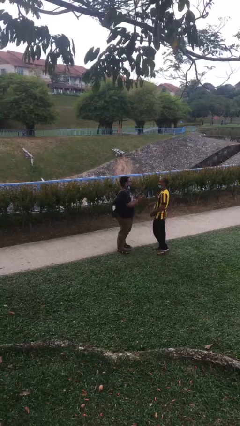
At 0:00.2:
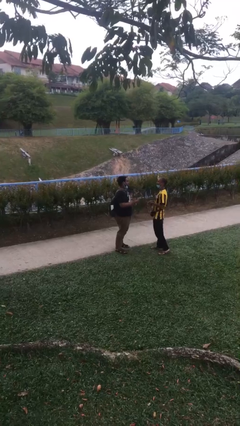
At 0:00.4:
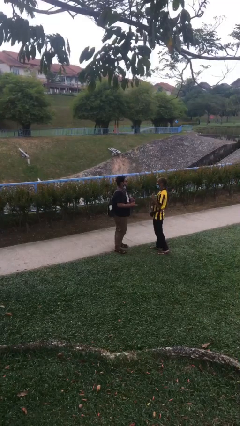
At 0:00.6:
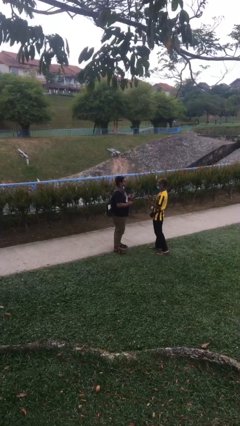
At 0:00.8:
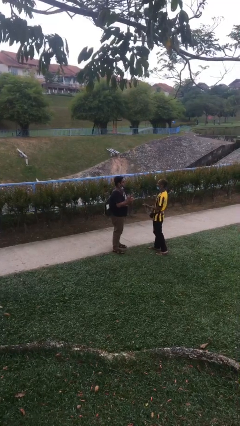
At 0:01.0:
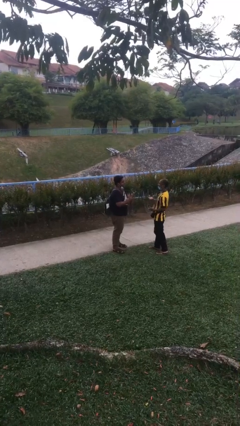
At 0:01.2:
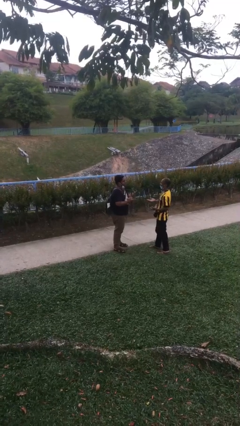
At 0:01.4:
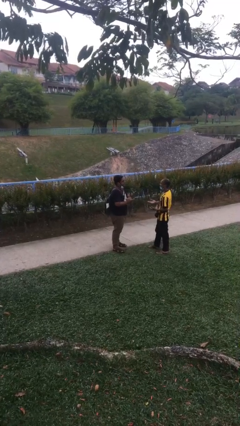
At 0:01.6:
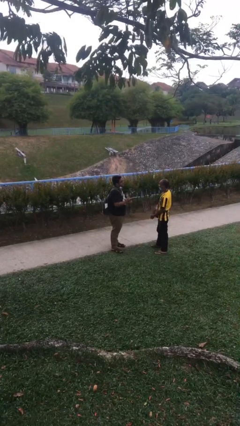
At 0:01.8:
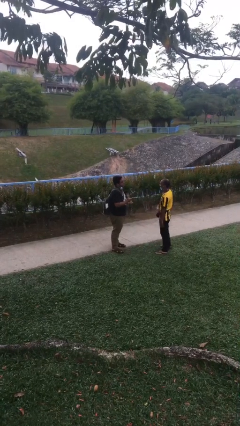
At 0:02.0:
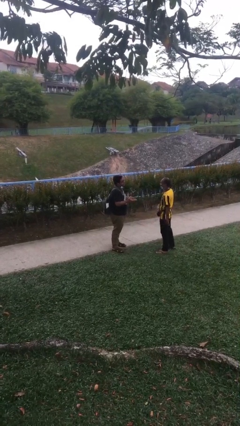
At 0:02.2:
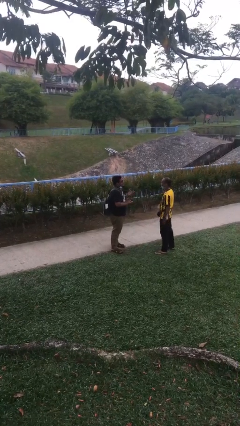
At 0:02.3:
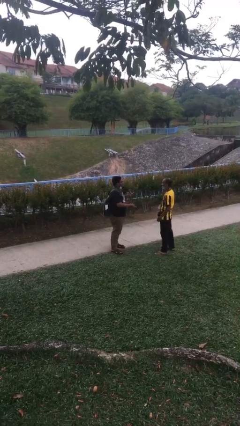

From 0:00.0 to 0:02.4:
person talks to person

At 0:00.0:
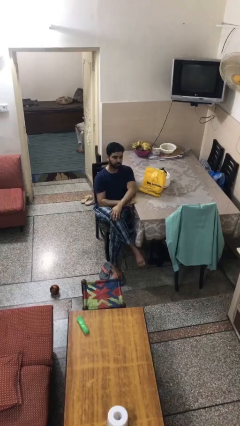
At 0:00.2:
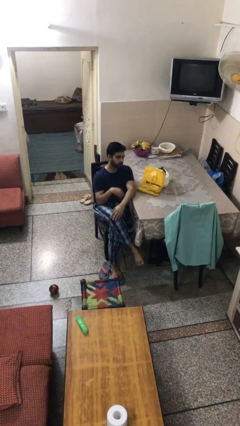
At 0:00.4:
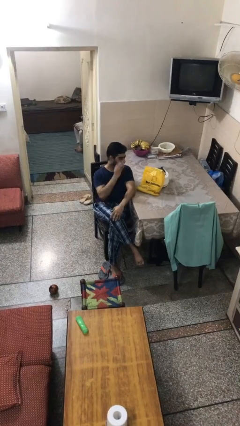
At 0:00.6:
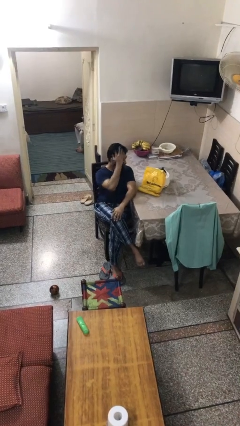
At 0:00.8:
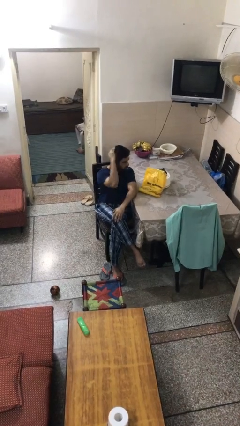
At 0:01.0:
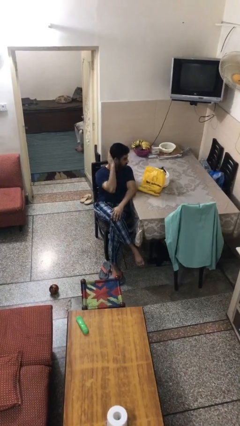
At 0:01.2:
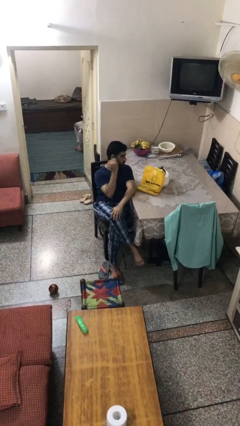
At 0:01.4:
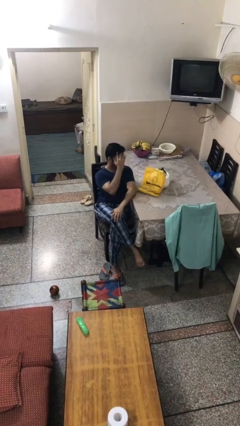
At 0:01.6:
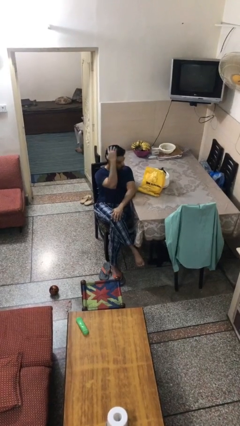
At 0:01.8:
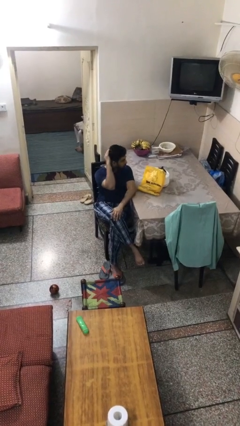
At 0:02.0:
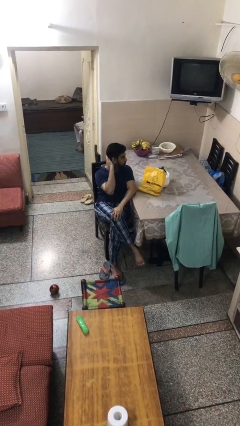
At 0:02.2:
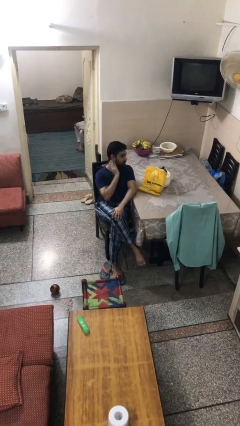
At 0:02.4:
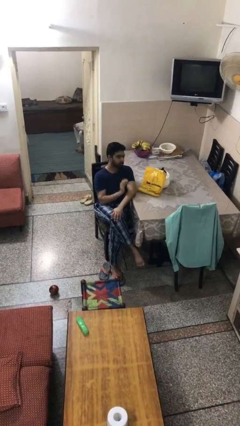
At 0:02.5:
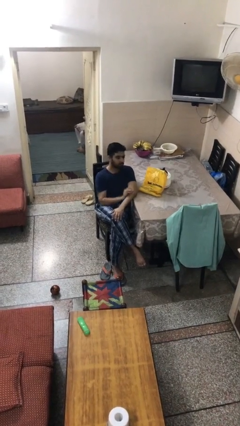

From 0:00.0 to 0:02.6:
person strokes hair

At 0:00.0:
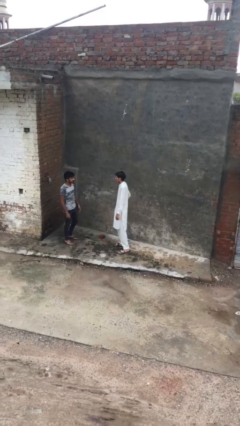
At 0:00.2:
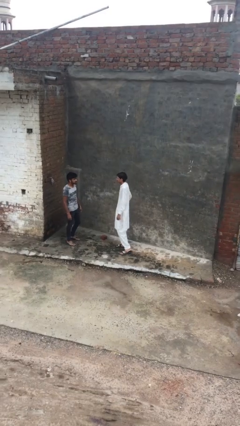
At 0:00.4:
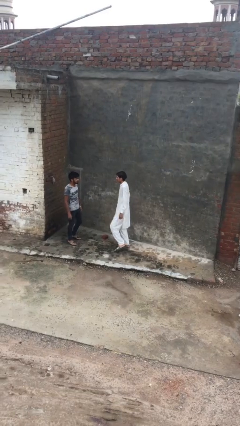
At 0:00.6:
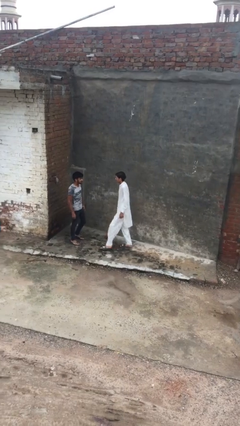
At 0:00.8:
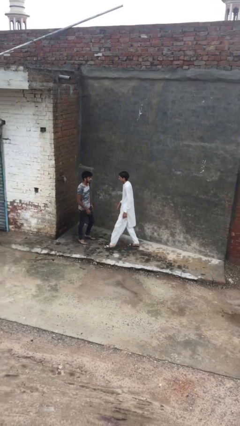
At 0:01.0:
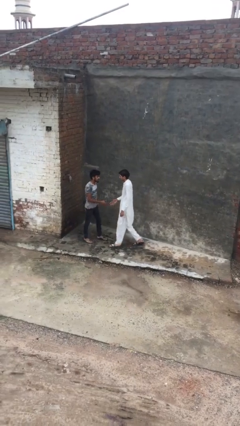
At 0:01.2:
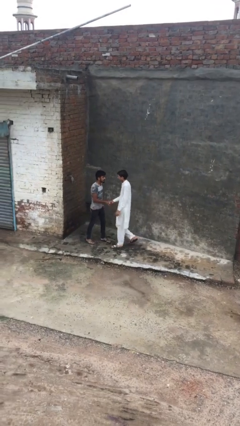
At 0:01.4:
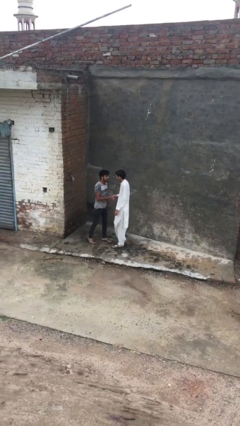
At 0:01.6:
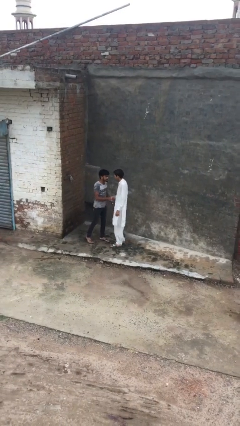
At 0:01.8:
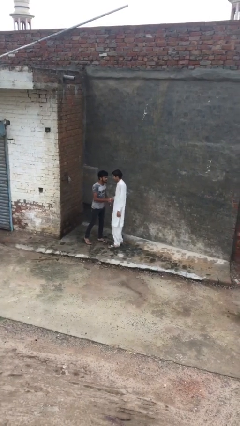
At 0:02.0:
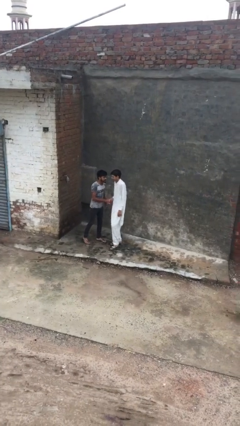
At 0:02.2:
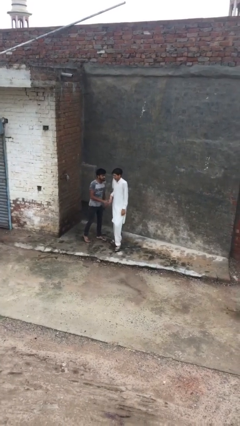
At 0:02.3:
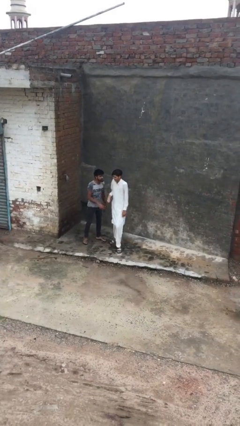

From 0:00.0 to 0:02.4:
person shakes hand

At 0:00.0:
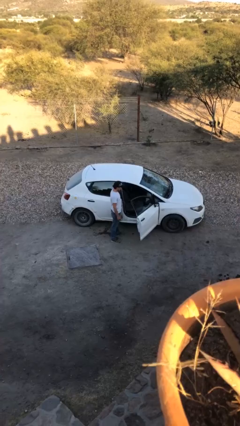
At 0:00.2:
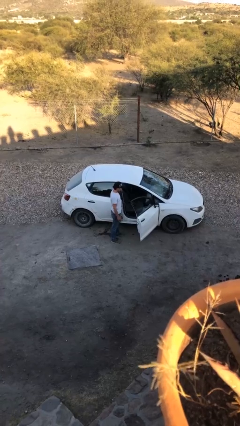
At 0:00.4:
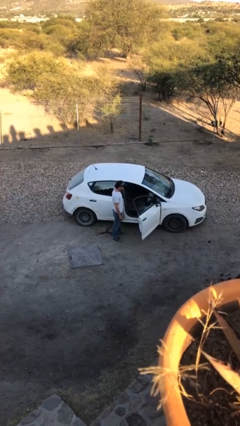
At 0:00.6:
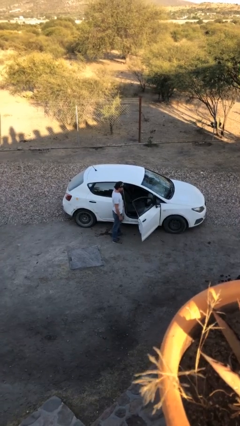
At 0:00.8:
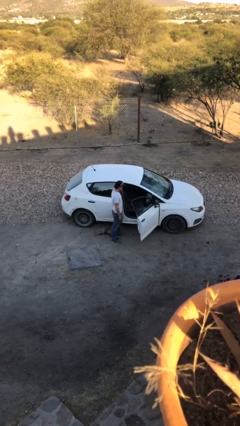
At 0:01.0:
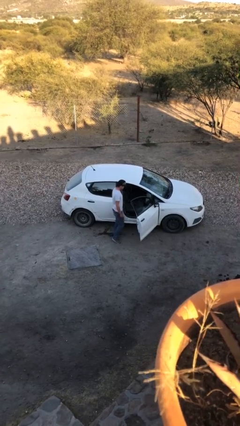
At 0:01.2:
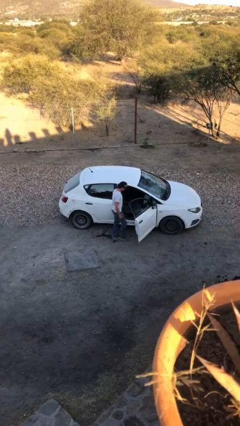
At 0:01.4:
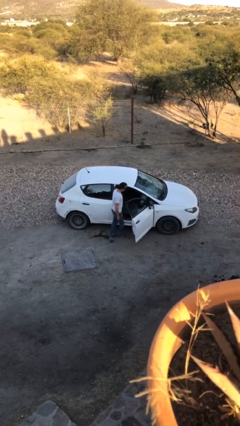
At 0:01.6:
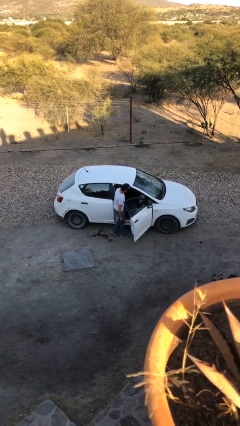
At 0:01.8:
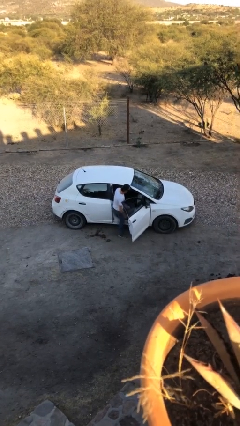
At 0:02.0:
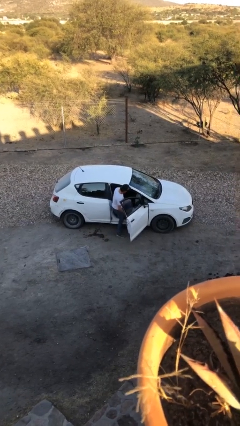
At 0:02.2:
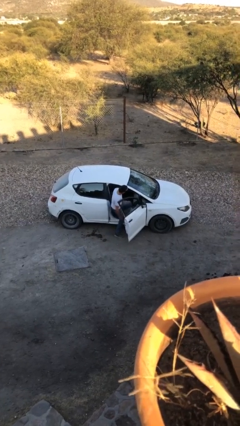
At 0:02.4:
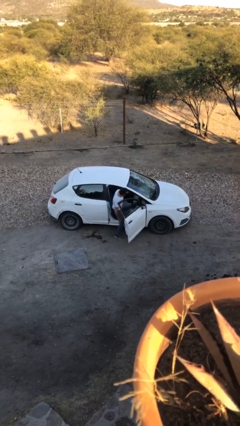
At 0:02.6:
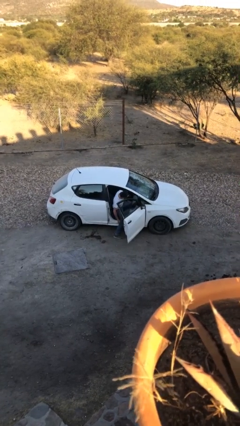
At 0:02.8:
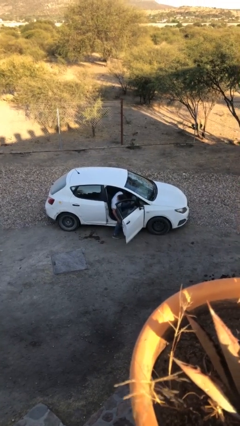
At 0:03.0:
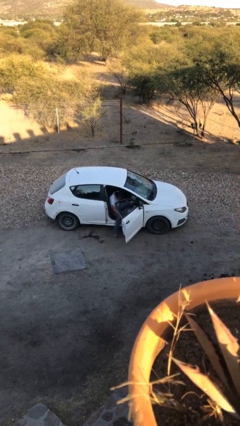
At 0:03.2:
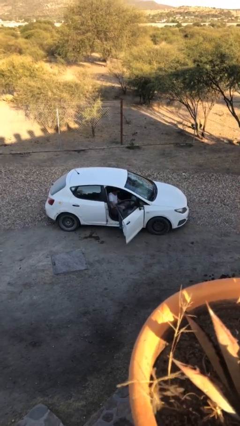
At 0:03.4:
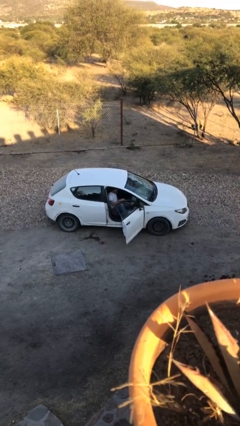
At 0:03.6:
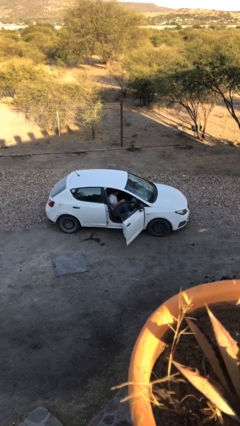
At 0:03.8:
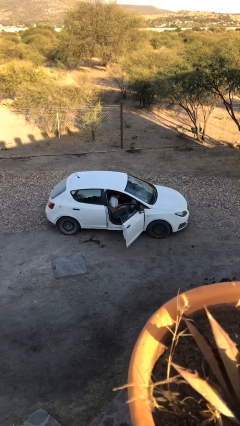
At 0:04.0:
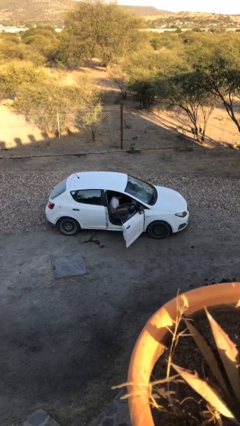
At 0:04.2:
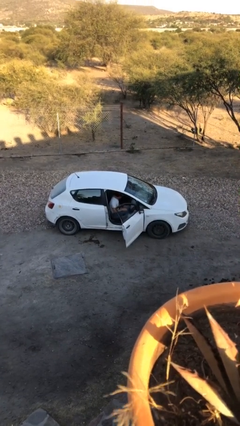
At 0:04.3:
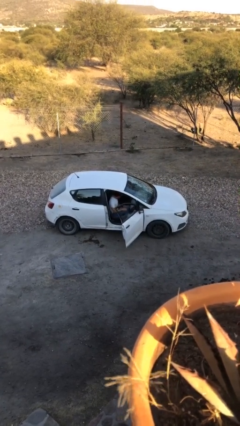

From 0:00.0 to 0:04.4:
person enters car

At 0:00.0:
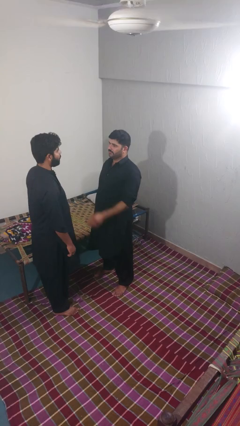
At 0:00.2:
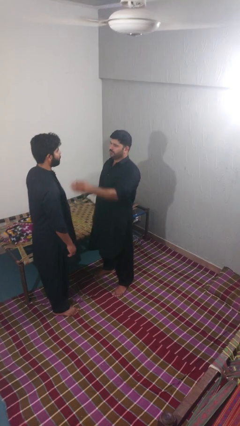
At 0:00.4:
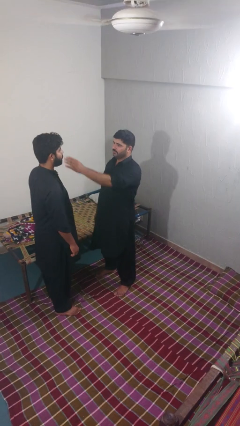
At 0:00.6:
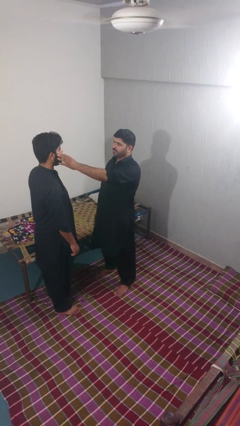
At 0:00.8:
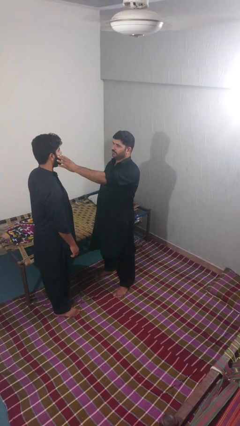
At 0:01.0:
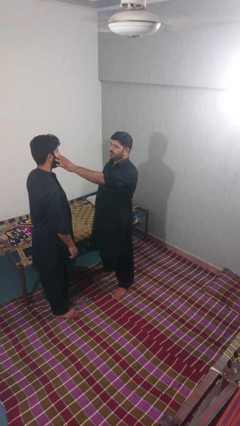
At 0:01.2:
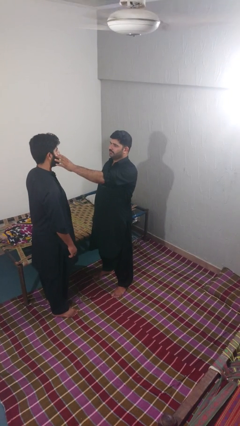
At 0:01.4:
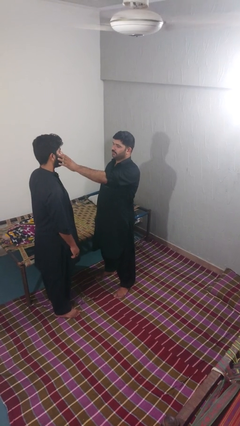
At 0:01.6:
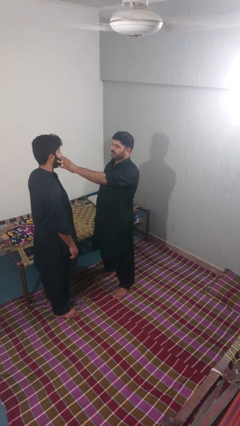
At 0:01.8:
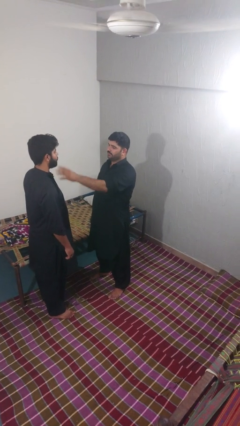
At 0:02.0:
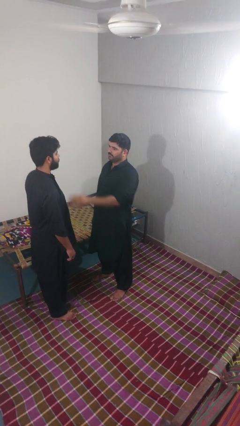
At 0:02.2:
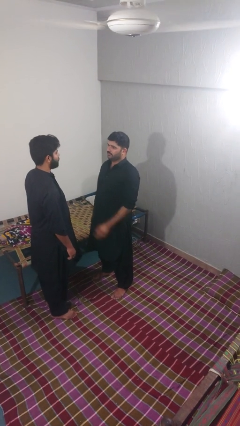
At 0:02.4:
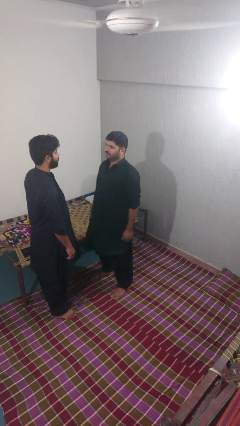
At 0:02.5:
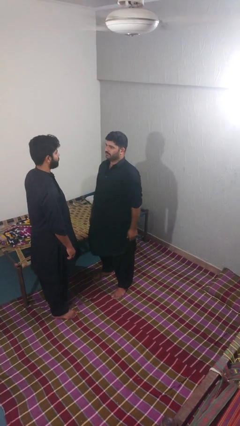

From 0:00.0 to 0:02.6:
person touches face of person

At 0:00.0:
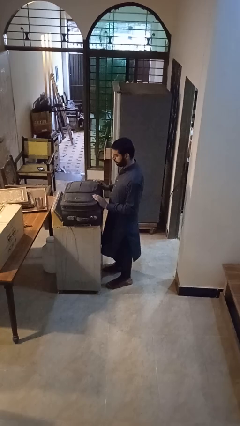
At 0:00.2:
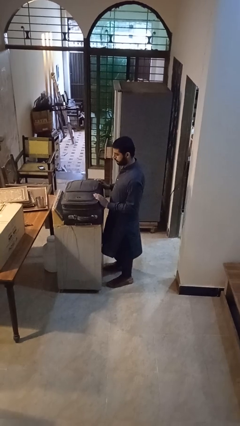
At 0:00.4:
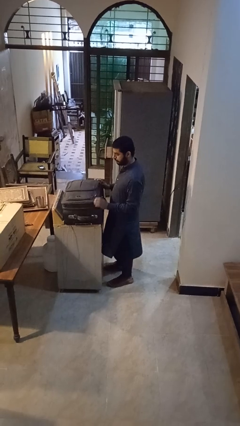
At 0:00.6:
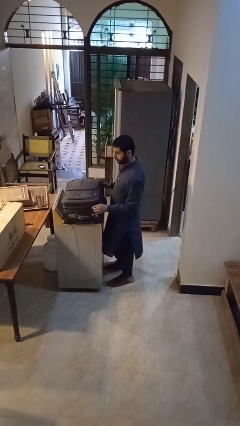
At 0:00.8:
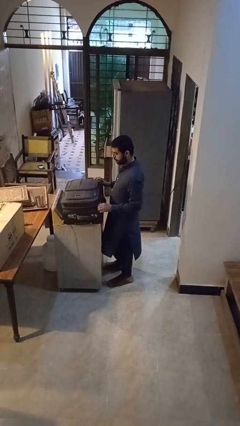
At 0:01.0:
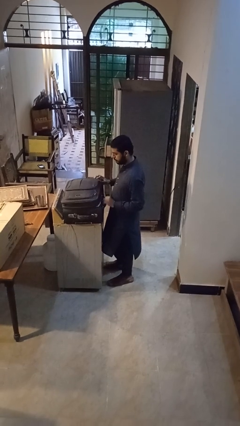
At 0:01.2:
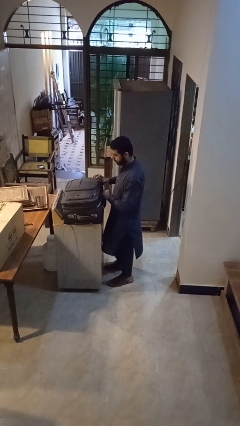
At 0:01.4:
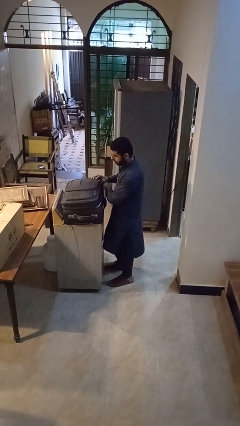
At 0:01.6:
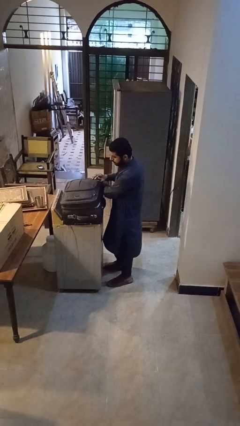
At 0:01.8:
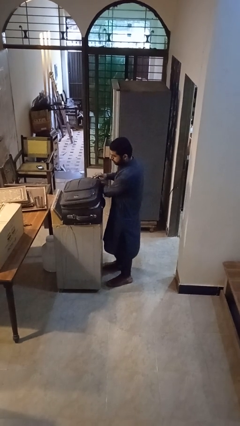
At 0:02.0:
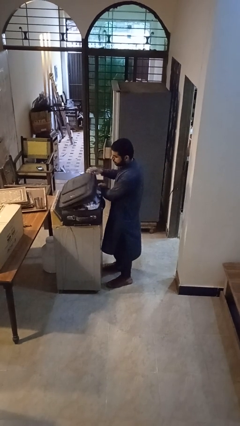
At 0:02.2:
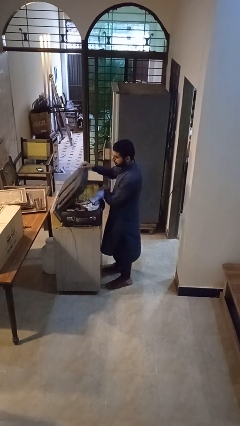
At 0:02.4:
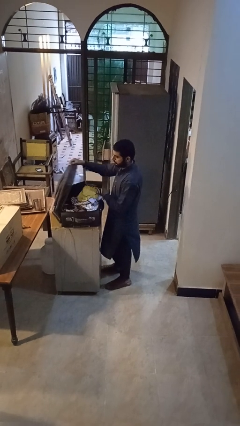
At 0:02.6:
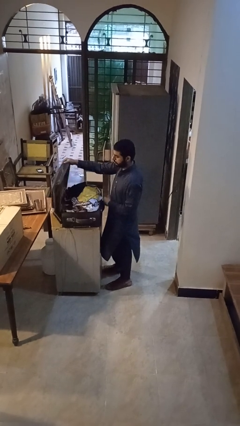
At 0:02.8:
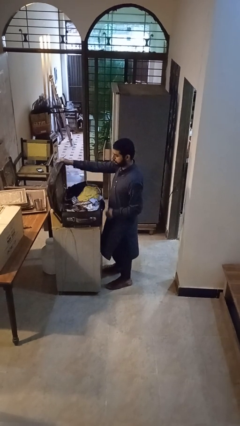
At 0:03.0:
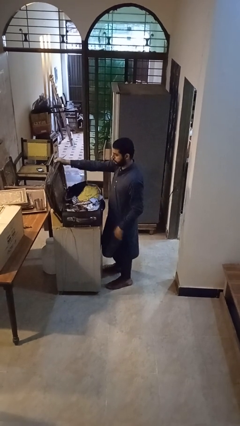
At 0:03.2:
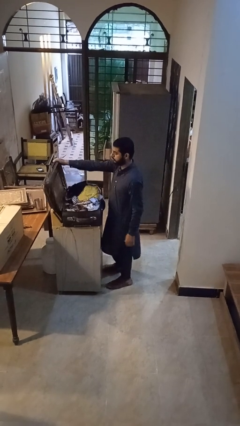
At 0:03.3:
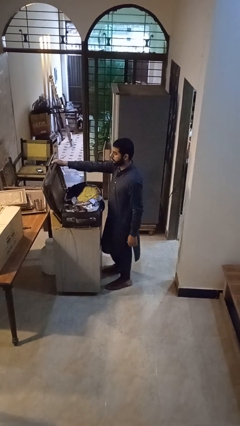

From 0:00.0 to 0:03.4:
person opens suitcase
